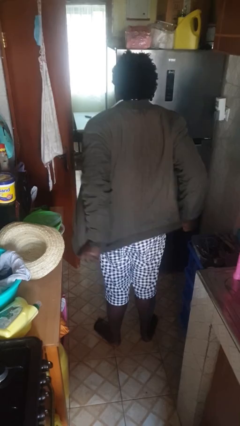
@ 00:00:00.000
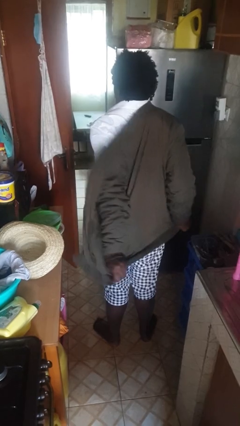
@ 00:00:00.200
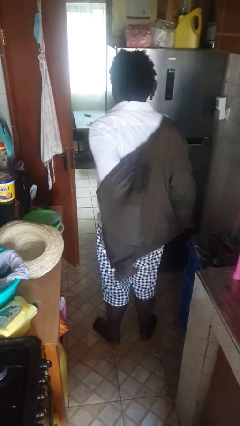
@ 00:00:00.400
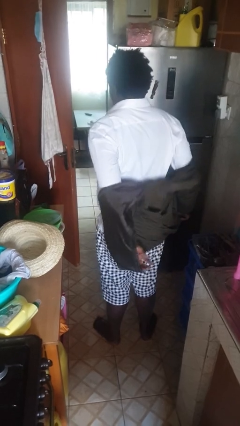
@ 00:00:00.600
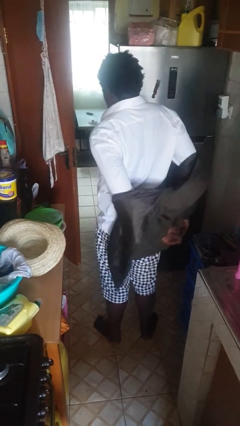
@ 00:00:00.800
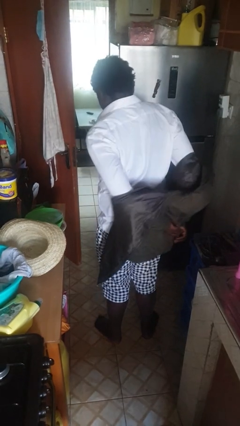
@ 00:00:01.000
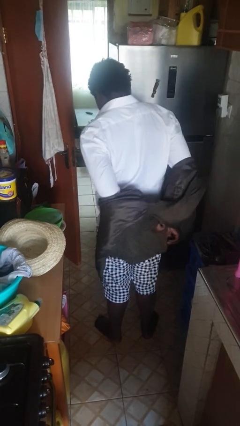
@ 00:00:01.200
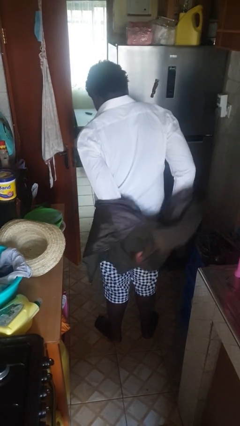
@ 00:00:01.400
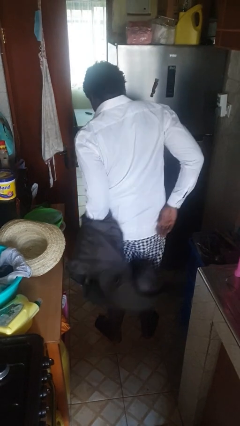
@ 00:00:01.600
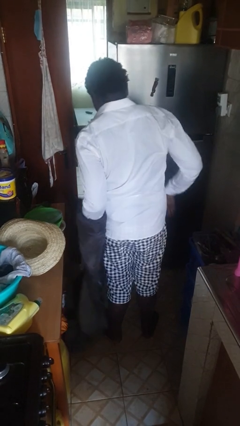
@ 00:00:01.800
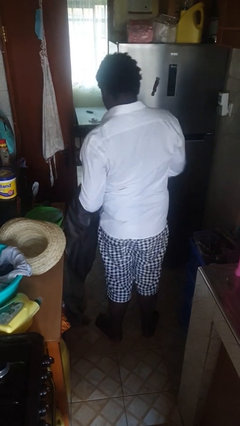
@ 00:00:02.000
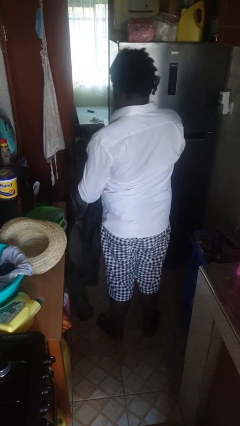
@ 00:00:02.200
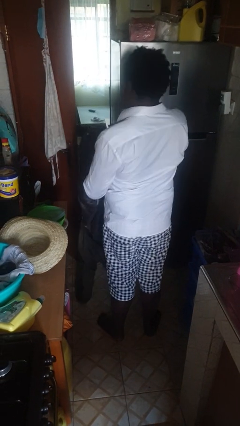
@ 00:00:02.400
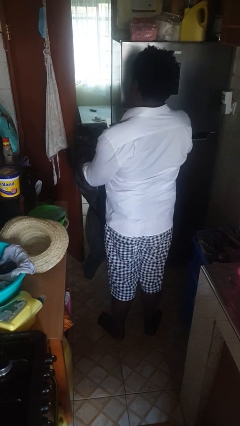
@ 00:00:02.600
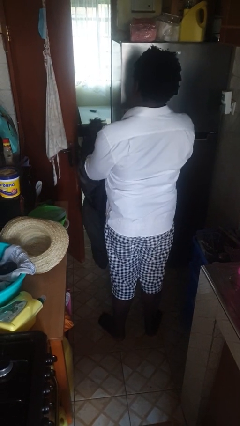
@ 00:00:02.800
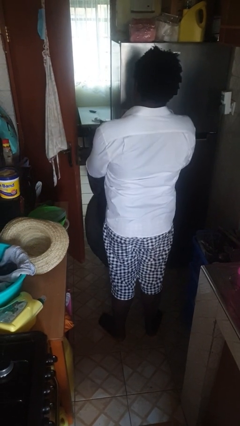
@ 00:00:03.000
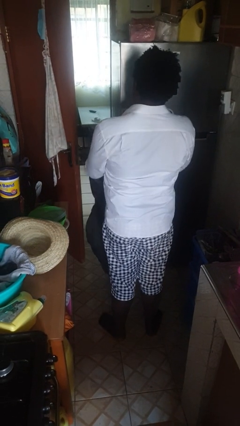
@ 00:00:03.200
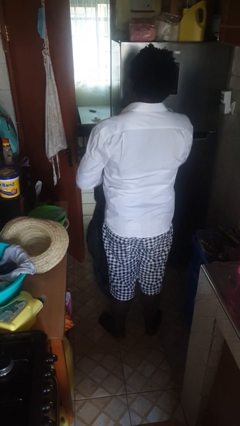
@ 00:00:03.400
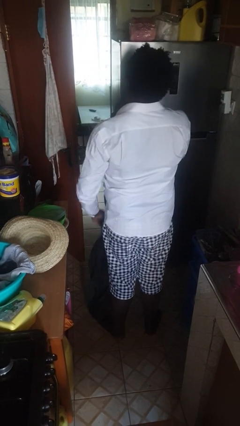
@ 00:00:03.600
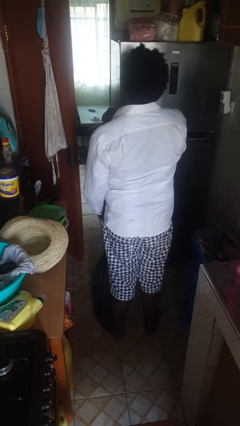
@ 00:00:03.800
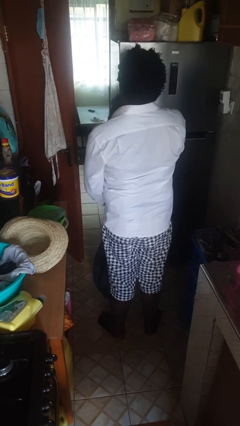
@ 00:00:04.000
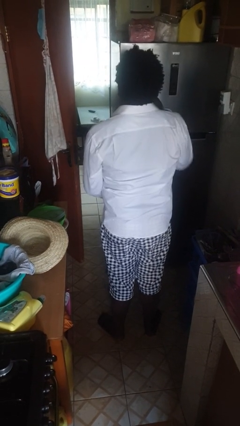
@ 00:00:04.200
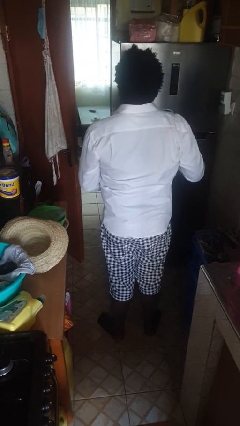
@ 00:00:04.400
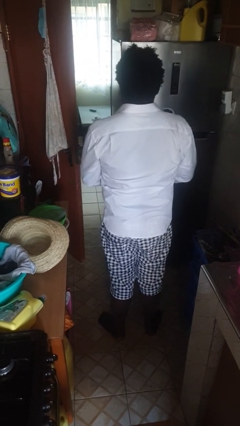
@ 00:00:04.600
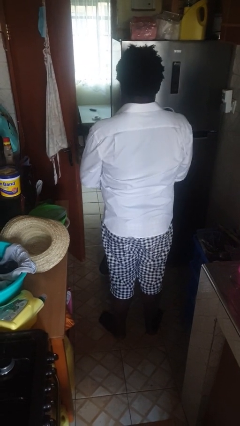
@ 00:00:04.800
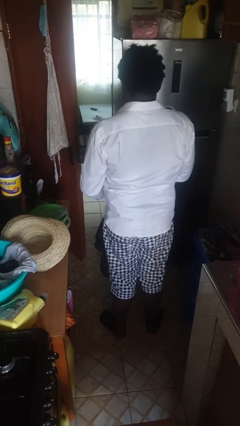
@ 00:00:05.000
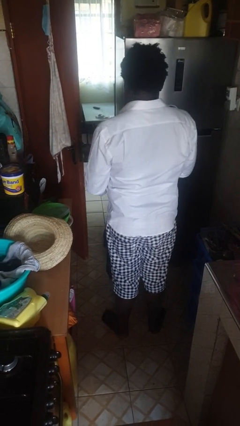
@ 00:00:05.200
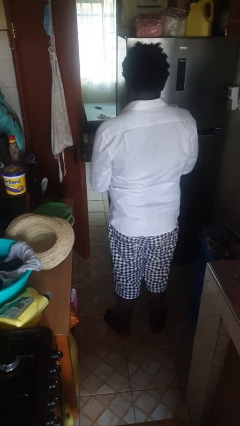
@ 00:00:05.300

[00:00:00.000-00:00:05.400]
person takes off jacket

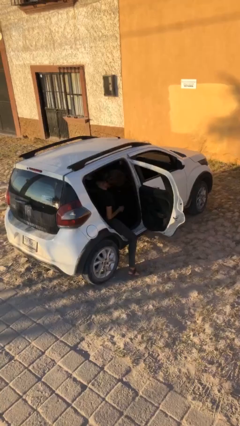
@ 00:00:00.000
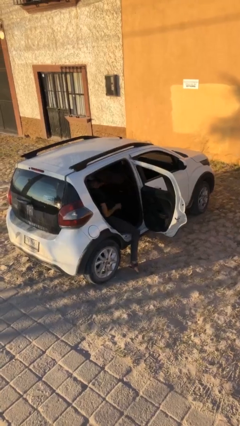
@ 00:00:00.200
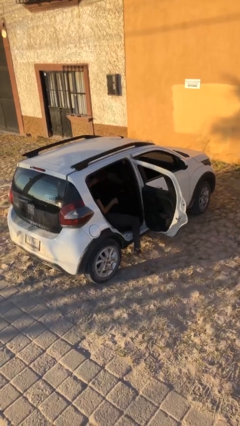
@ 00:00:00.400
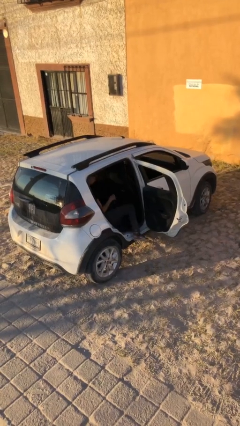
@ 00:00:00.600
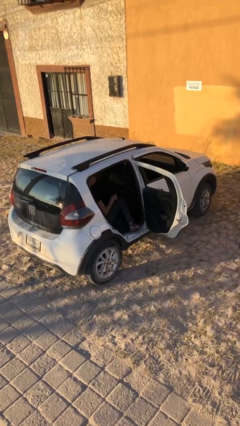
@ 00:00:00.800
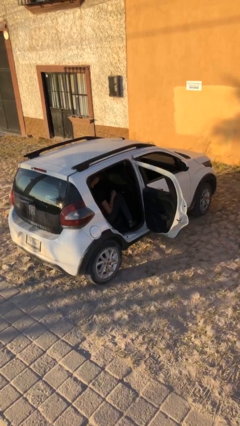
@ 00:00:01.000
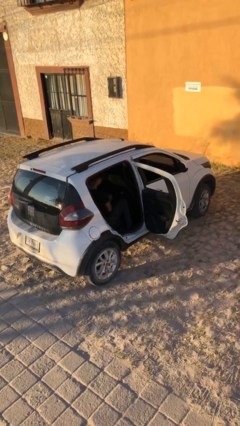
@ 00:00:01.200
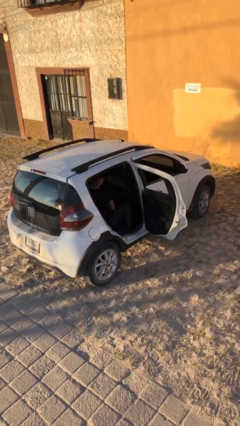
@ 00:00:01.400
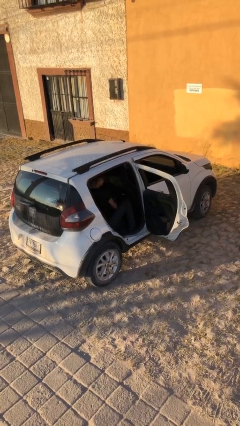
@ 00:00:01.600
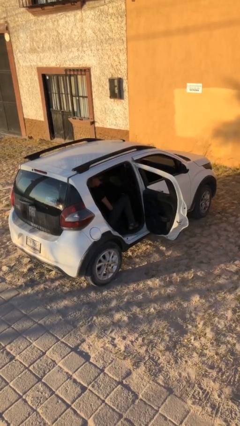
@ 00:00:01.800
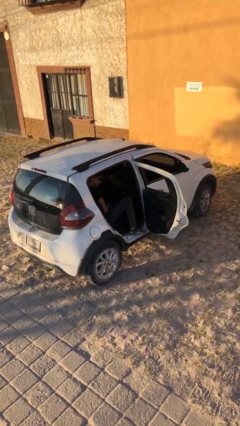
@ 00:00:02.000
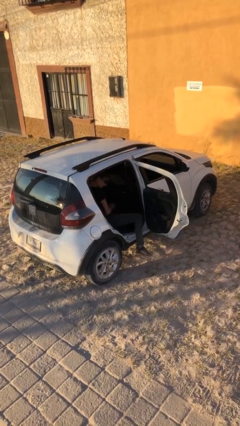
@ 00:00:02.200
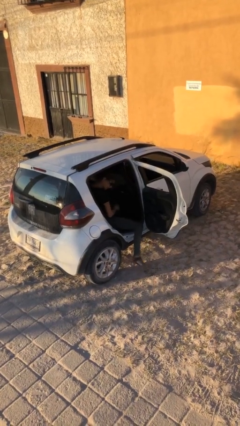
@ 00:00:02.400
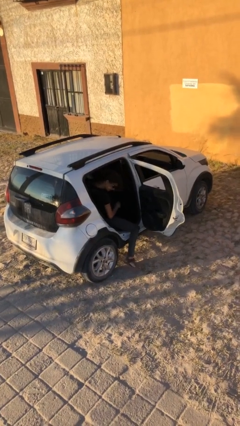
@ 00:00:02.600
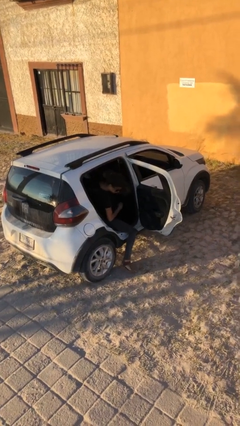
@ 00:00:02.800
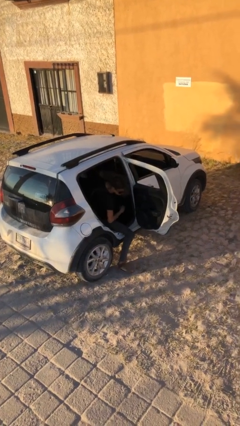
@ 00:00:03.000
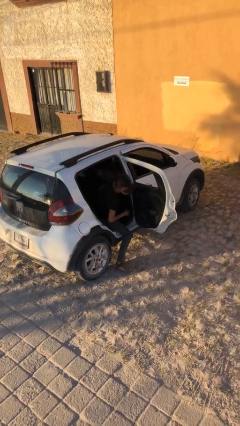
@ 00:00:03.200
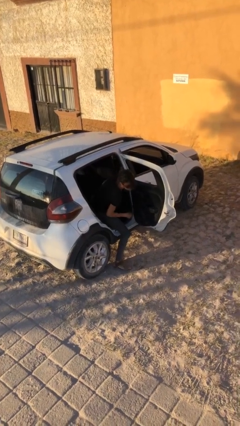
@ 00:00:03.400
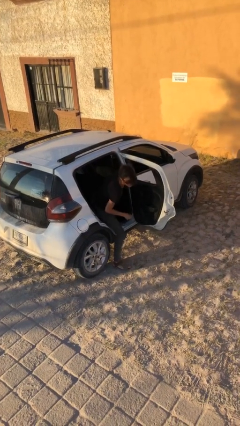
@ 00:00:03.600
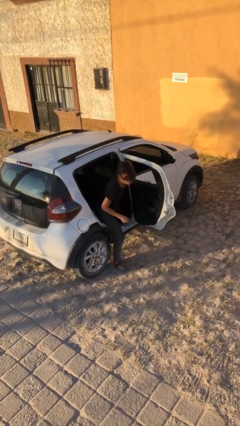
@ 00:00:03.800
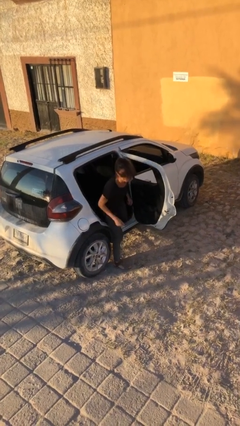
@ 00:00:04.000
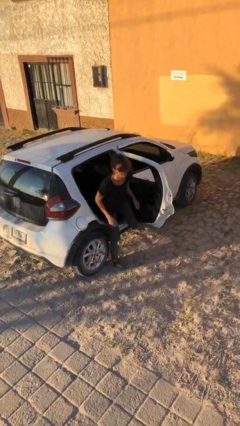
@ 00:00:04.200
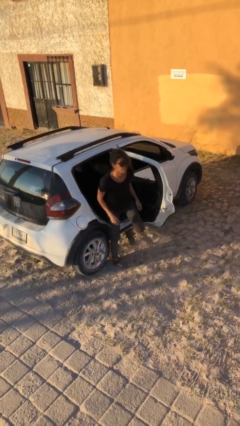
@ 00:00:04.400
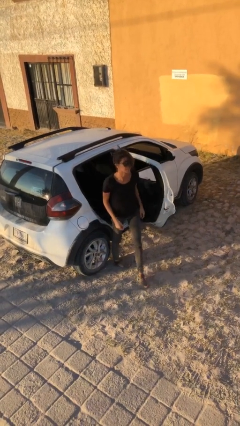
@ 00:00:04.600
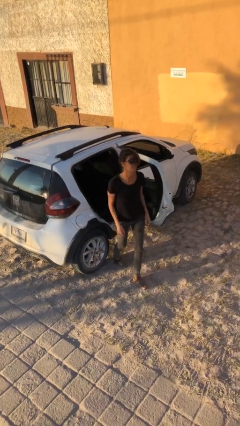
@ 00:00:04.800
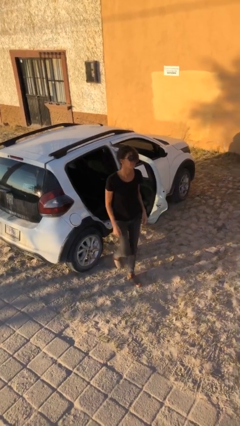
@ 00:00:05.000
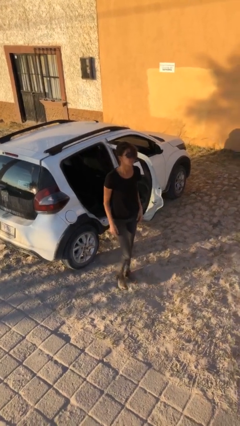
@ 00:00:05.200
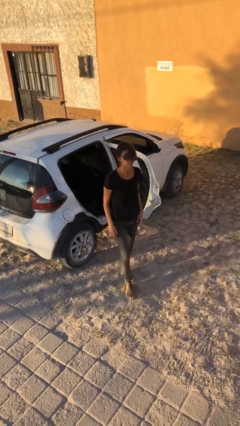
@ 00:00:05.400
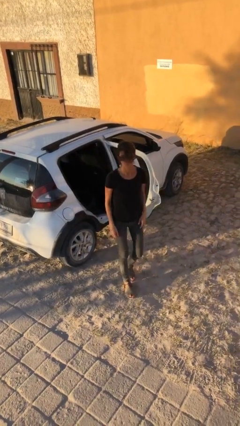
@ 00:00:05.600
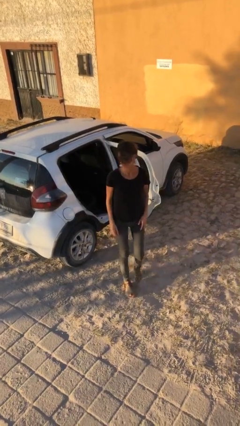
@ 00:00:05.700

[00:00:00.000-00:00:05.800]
person exits car

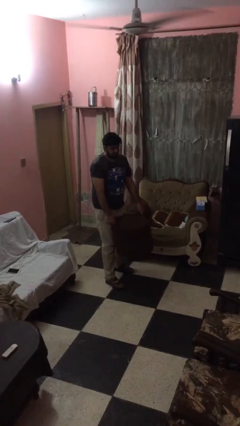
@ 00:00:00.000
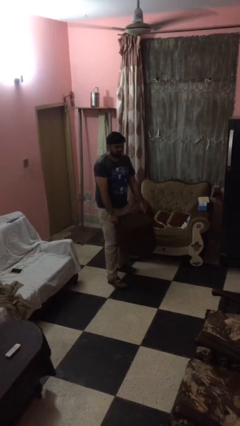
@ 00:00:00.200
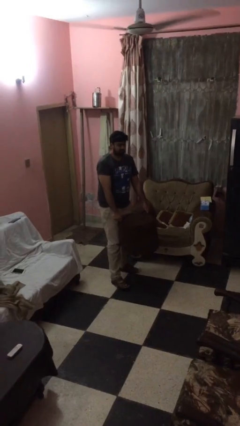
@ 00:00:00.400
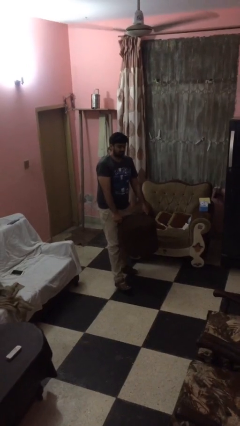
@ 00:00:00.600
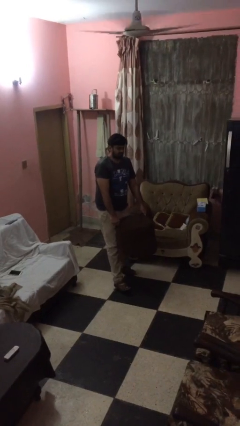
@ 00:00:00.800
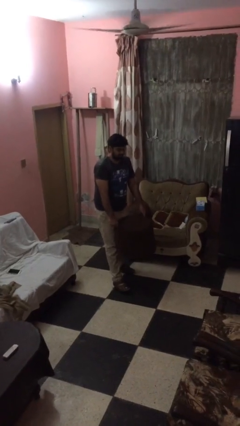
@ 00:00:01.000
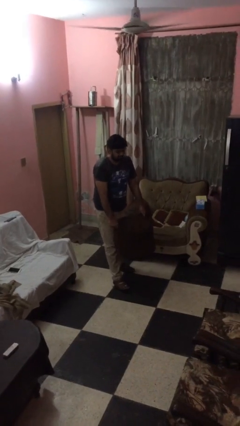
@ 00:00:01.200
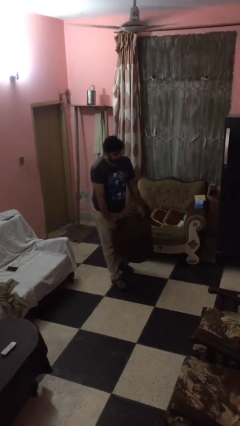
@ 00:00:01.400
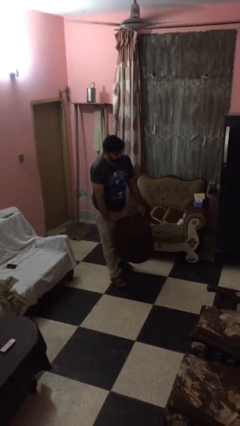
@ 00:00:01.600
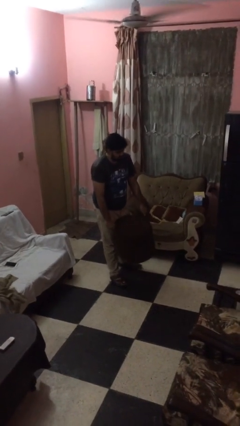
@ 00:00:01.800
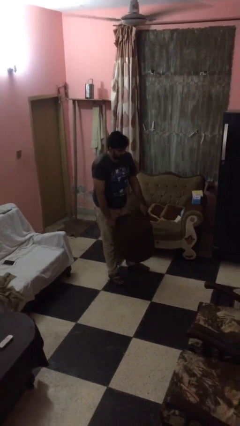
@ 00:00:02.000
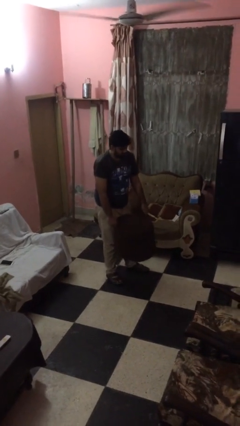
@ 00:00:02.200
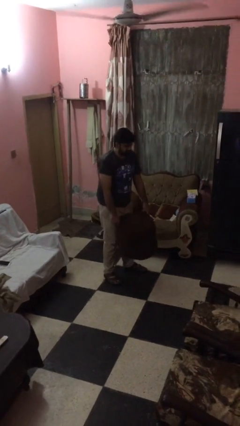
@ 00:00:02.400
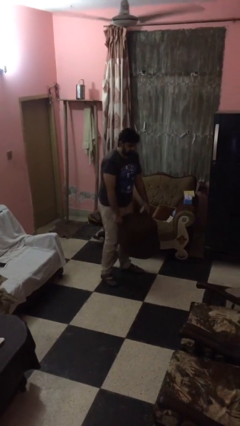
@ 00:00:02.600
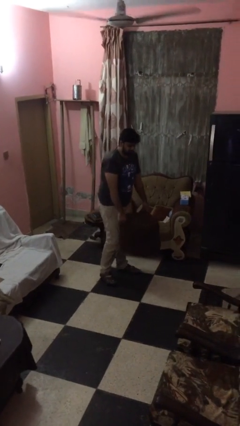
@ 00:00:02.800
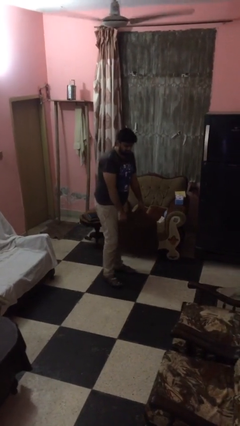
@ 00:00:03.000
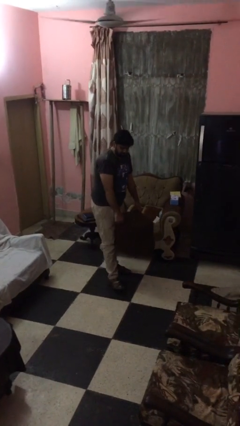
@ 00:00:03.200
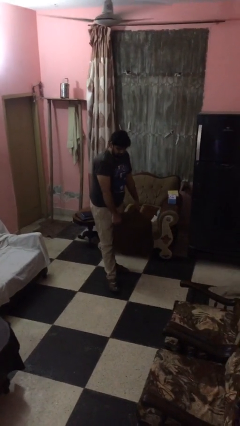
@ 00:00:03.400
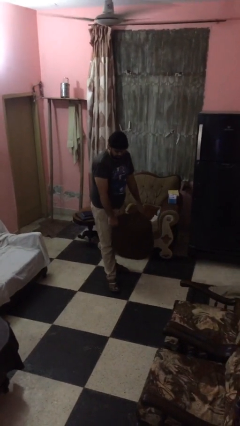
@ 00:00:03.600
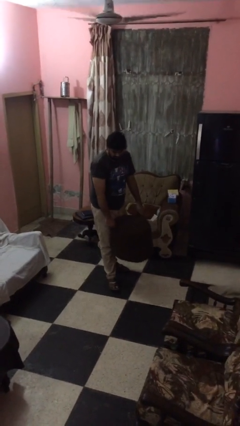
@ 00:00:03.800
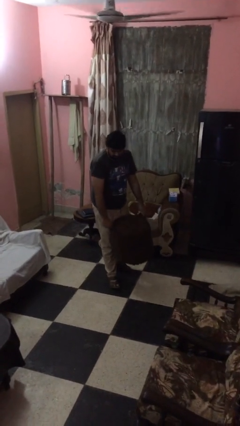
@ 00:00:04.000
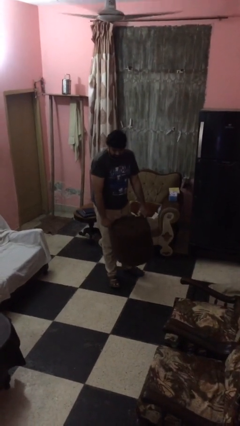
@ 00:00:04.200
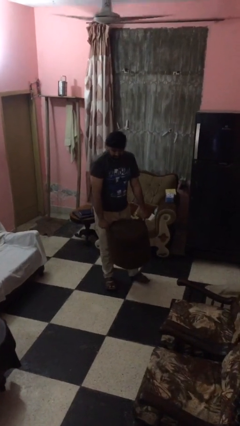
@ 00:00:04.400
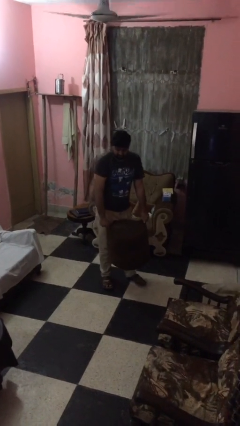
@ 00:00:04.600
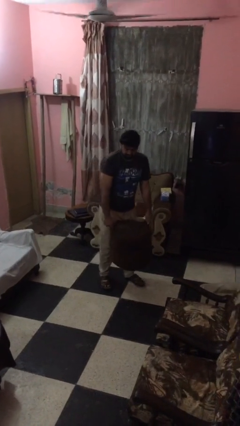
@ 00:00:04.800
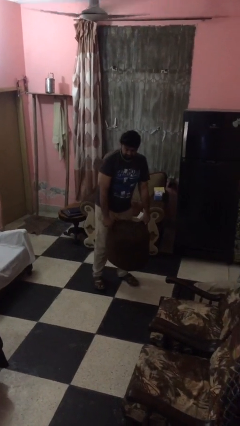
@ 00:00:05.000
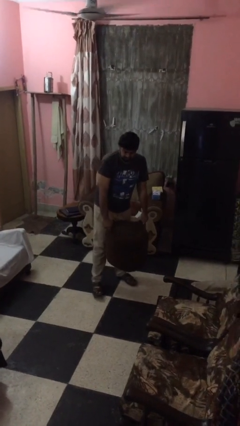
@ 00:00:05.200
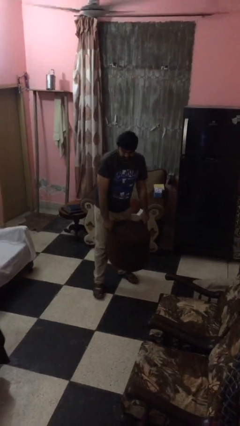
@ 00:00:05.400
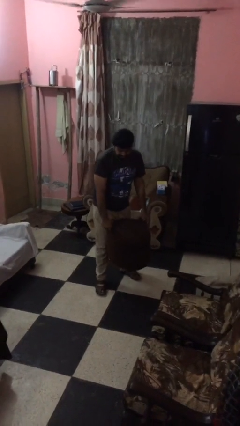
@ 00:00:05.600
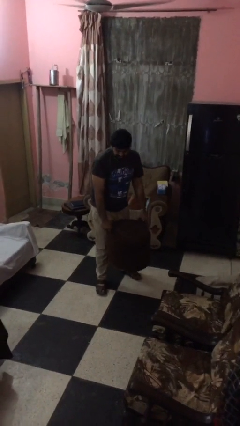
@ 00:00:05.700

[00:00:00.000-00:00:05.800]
person carries heavy object

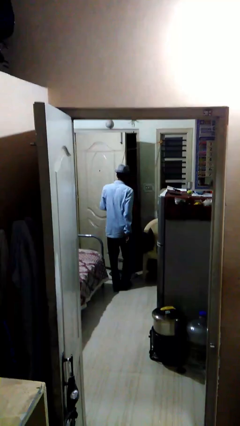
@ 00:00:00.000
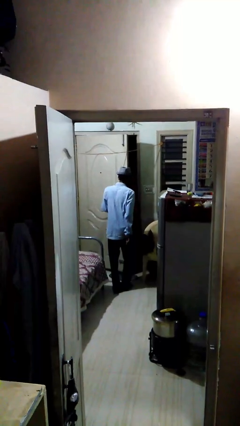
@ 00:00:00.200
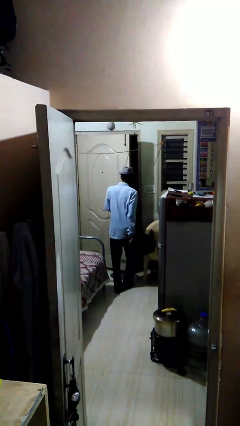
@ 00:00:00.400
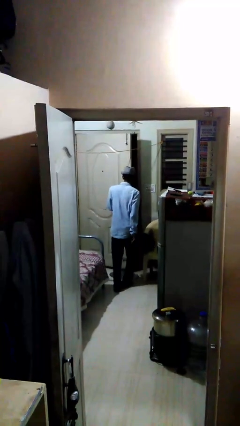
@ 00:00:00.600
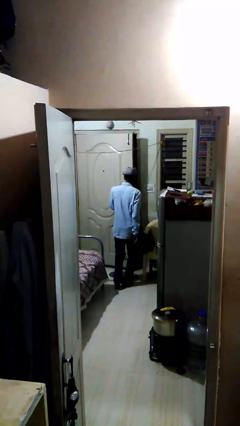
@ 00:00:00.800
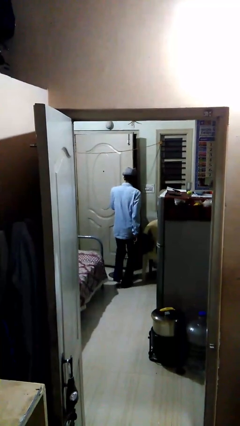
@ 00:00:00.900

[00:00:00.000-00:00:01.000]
person closes facility door
